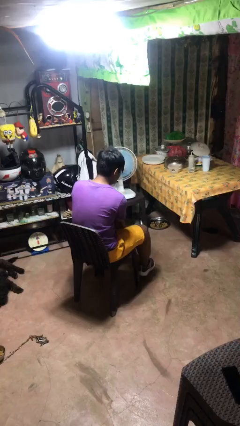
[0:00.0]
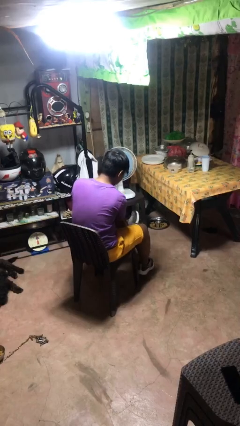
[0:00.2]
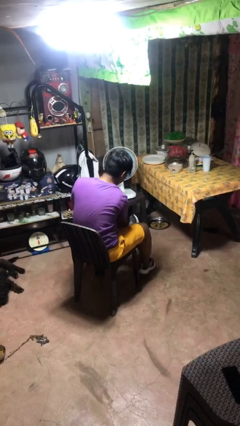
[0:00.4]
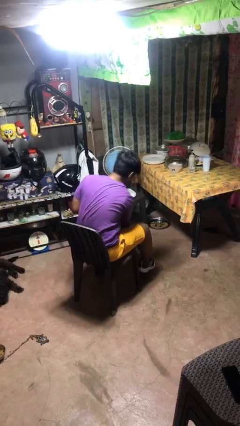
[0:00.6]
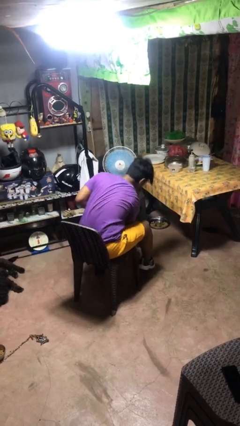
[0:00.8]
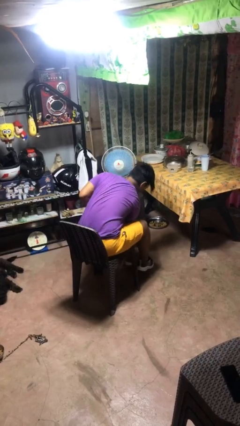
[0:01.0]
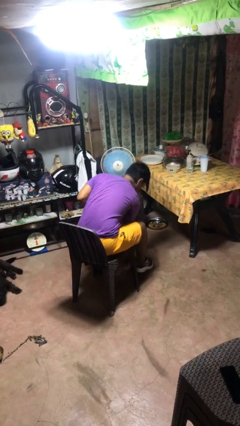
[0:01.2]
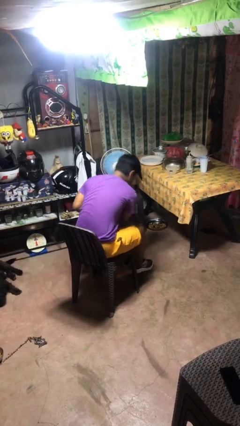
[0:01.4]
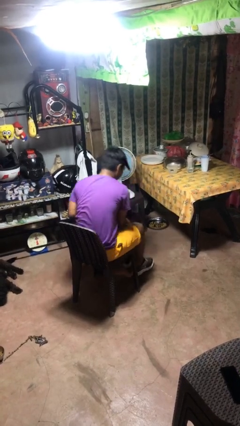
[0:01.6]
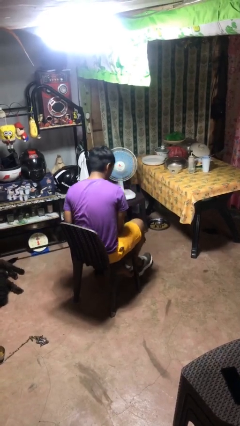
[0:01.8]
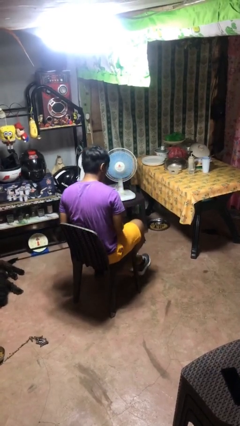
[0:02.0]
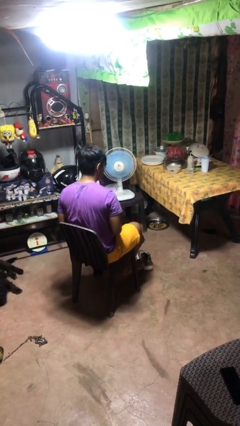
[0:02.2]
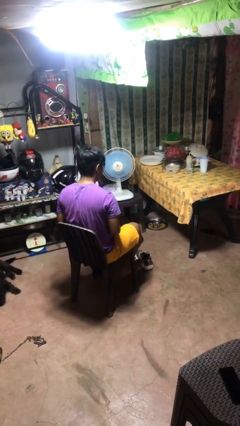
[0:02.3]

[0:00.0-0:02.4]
person takes off shoes

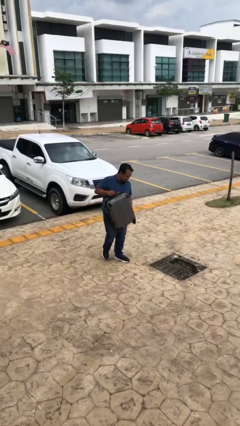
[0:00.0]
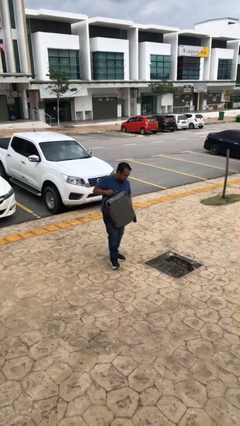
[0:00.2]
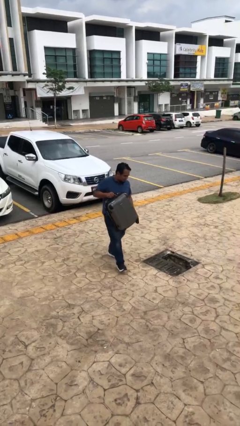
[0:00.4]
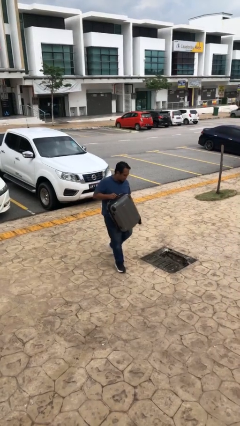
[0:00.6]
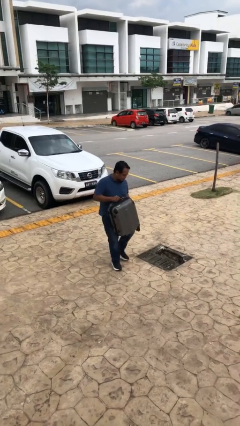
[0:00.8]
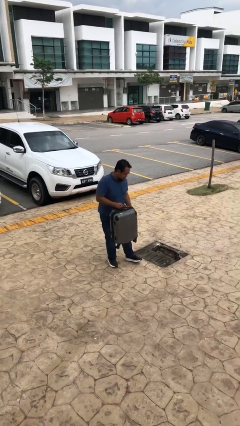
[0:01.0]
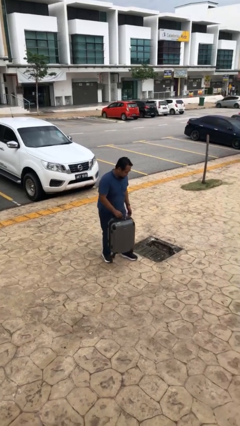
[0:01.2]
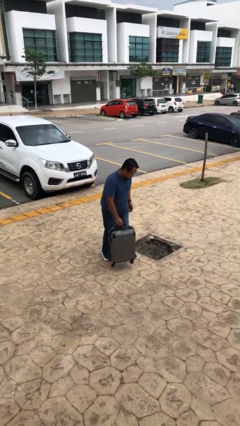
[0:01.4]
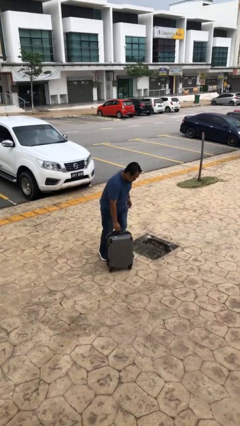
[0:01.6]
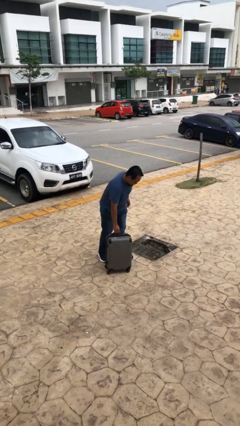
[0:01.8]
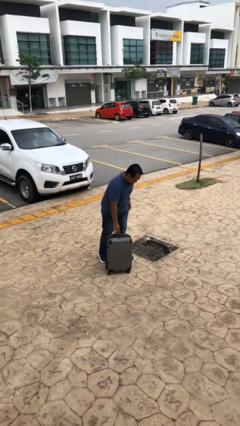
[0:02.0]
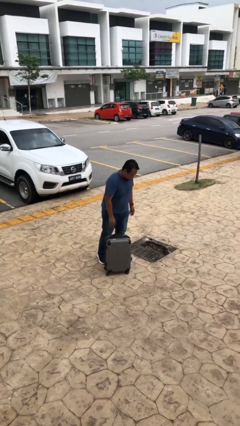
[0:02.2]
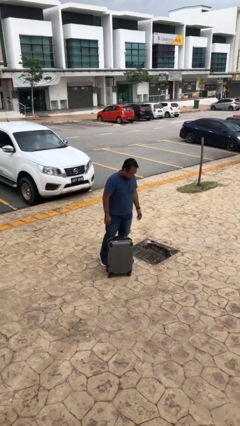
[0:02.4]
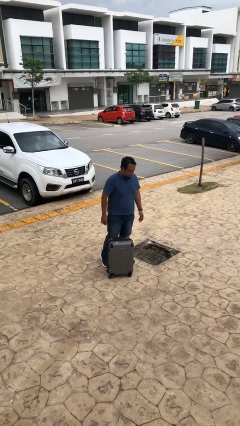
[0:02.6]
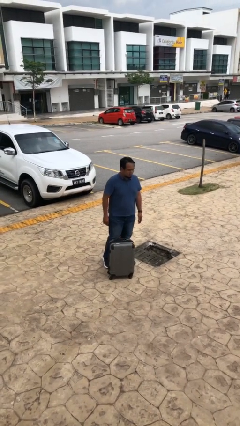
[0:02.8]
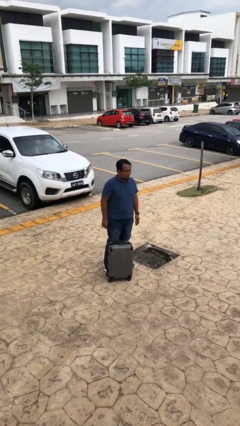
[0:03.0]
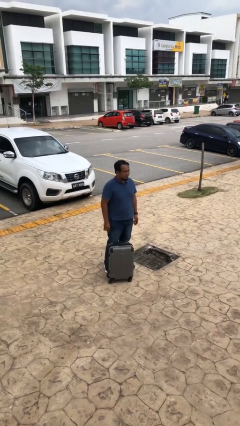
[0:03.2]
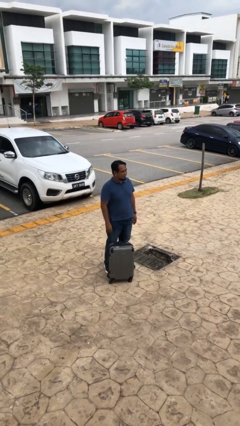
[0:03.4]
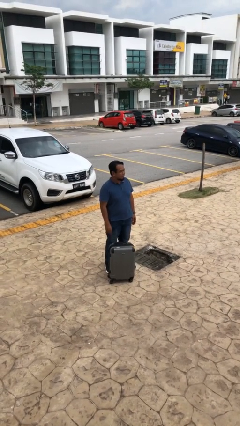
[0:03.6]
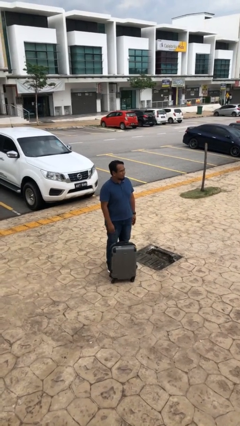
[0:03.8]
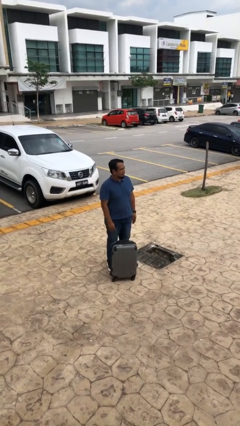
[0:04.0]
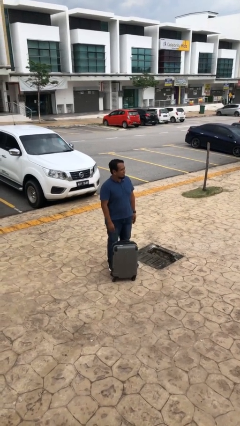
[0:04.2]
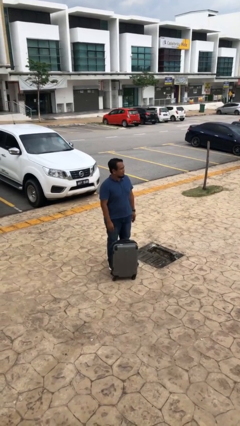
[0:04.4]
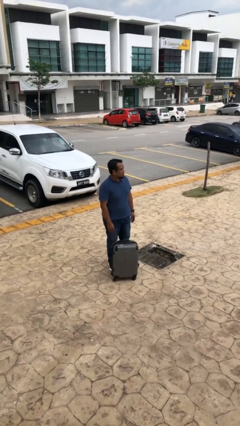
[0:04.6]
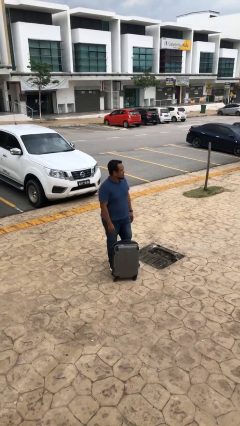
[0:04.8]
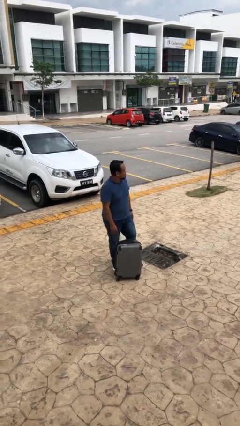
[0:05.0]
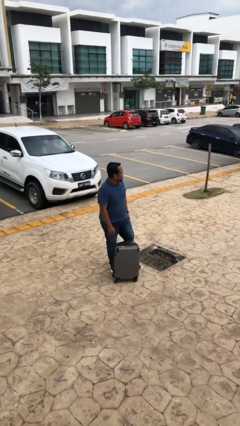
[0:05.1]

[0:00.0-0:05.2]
person puts down object on floor

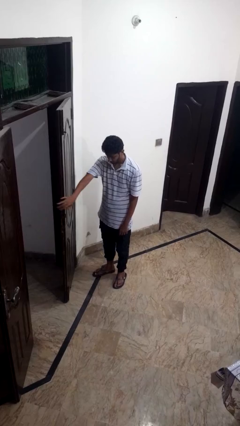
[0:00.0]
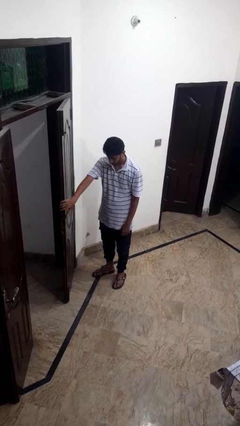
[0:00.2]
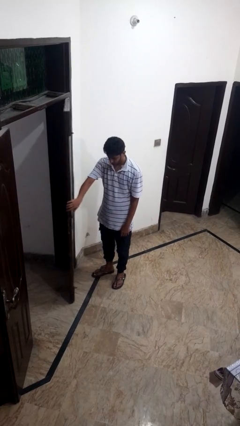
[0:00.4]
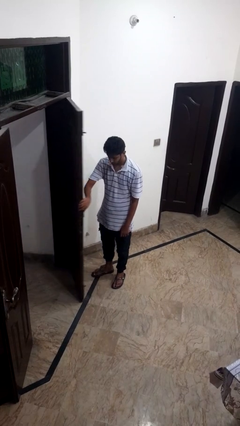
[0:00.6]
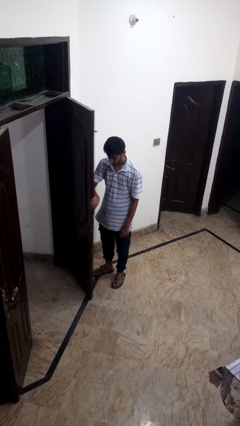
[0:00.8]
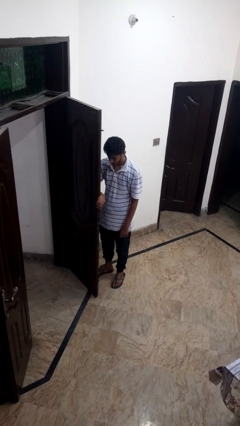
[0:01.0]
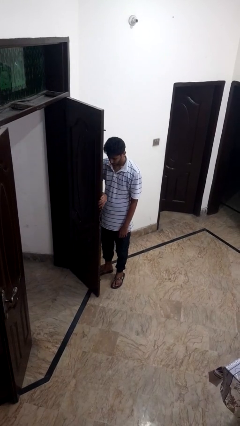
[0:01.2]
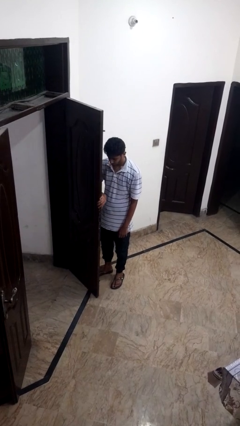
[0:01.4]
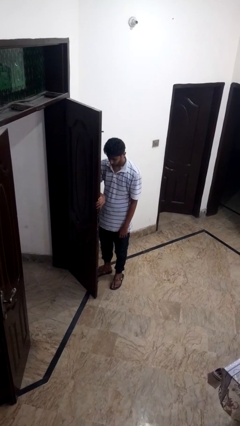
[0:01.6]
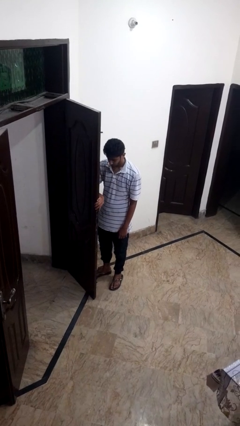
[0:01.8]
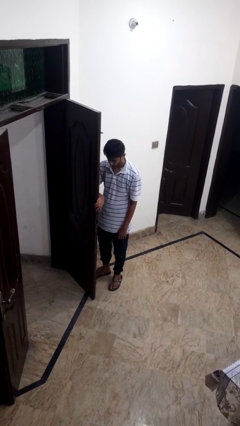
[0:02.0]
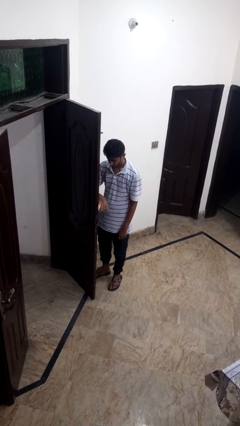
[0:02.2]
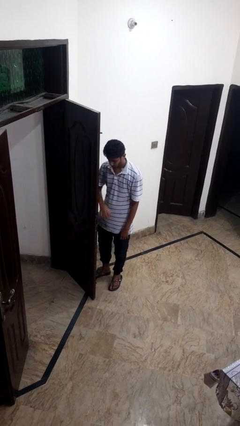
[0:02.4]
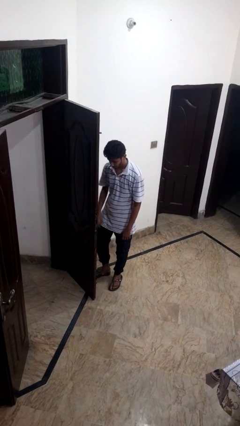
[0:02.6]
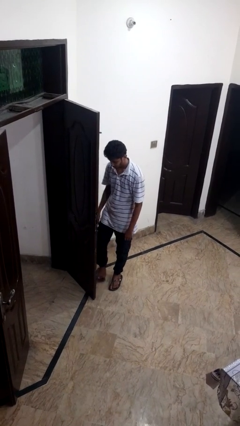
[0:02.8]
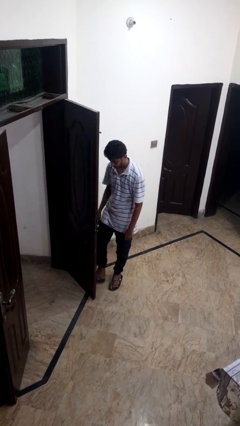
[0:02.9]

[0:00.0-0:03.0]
person opens facility door

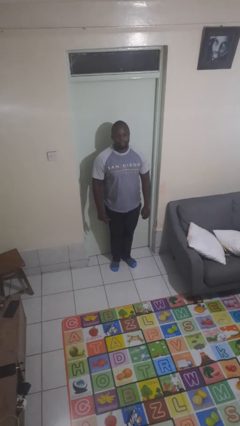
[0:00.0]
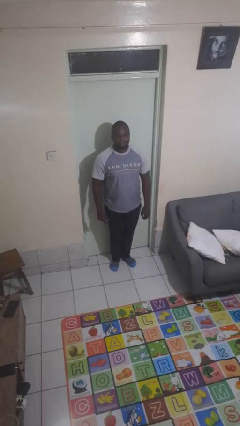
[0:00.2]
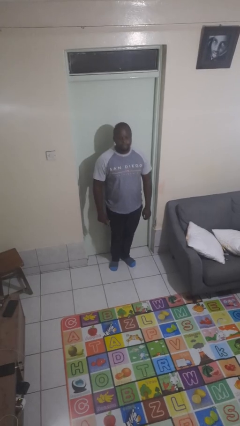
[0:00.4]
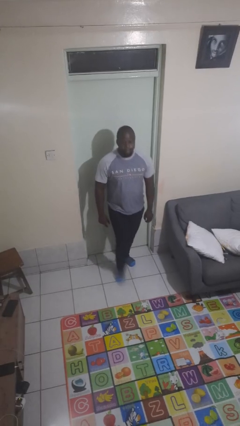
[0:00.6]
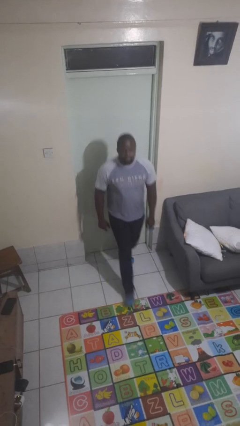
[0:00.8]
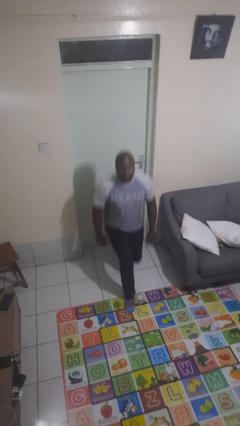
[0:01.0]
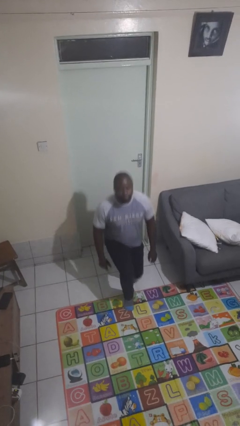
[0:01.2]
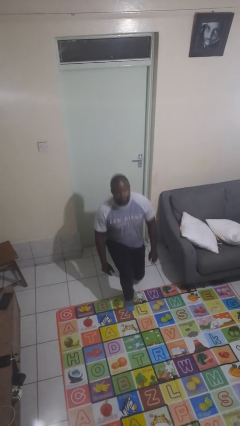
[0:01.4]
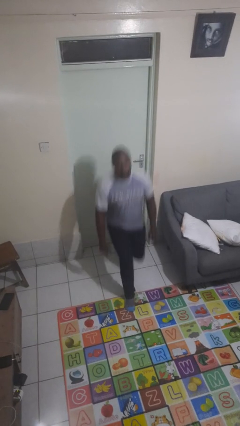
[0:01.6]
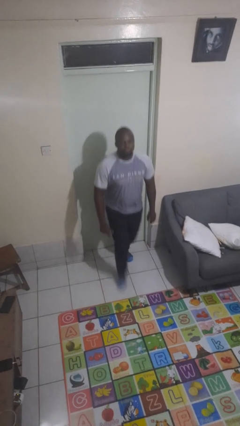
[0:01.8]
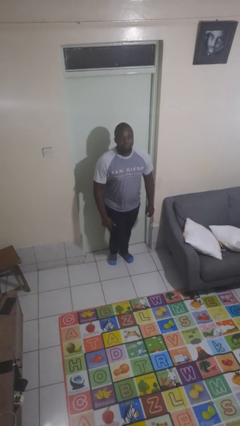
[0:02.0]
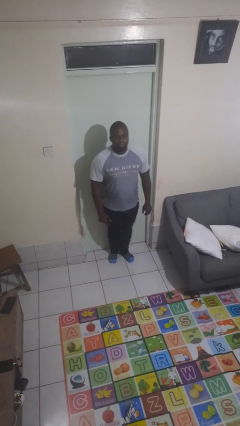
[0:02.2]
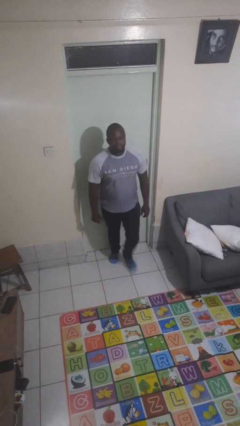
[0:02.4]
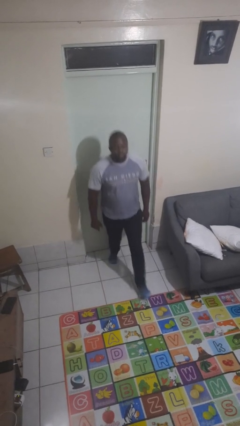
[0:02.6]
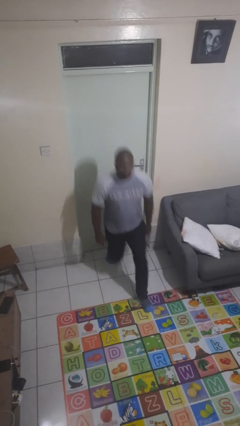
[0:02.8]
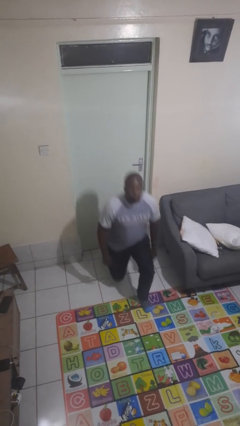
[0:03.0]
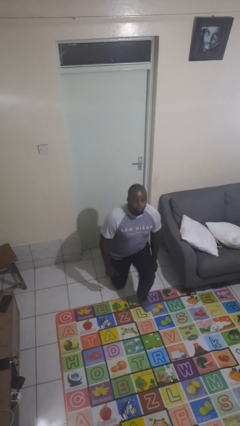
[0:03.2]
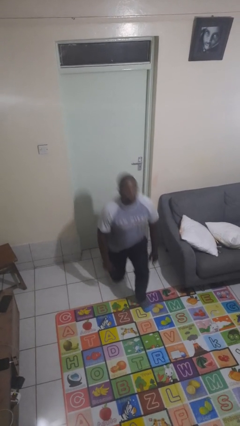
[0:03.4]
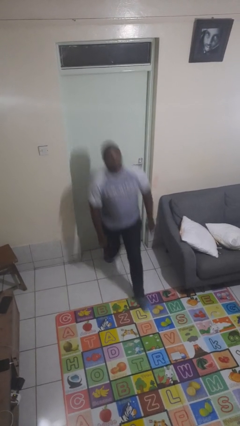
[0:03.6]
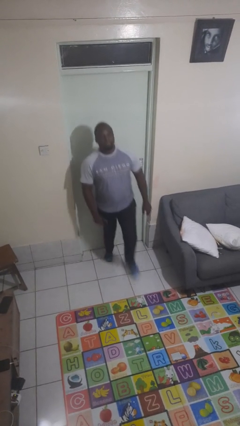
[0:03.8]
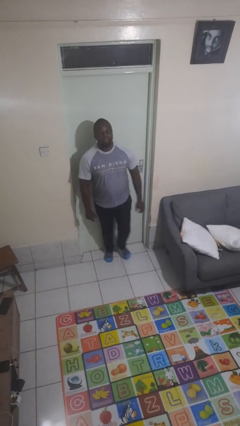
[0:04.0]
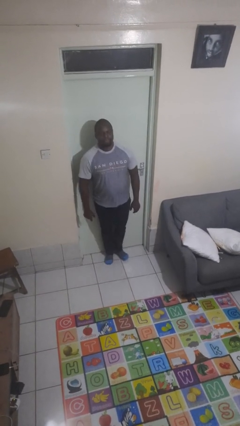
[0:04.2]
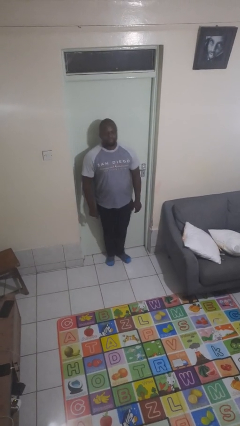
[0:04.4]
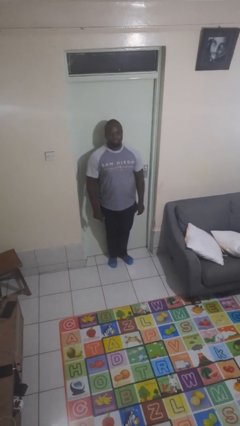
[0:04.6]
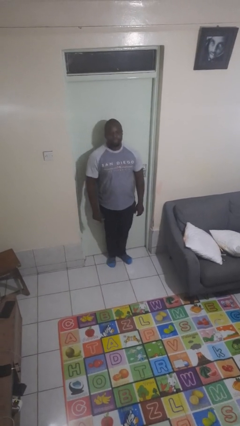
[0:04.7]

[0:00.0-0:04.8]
person exercises with lunges

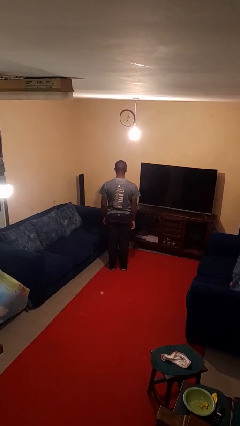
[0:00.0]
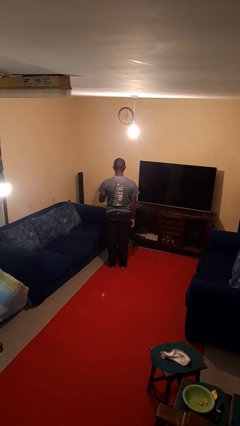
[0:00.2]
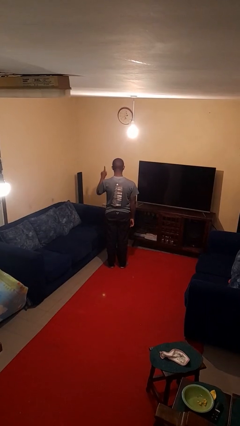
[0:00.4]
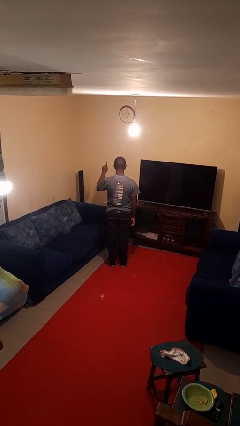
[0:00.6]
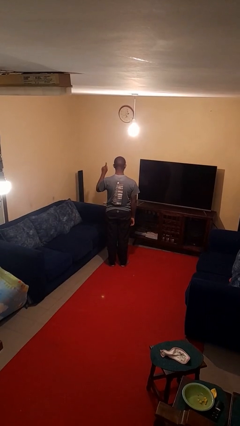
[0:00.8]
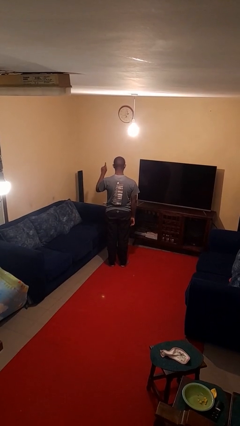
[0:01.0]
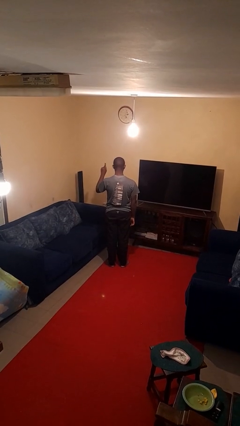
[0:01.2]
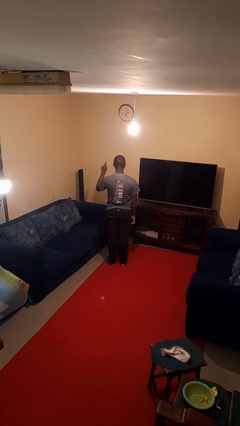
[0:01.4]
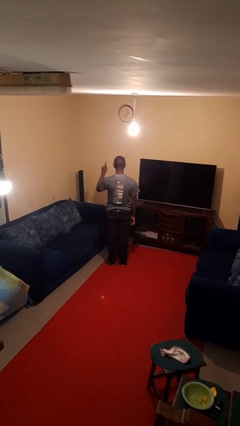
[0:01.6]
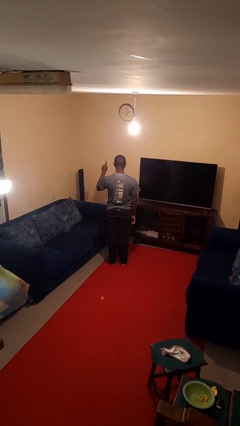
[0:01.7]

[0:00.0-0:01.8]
person gestures number one
